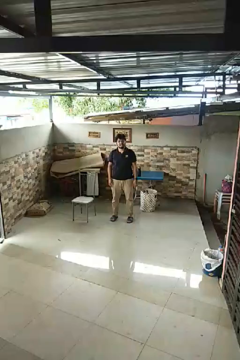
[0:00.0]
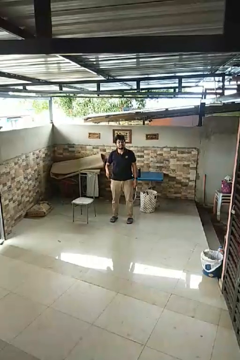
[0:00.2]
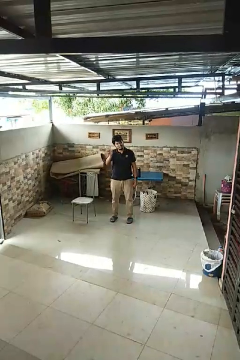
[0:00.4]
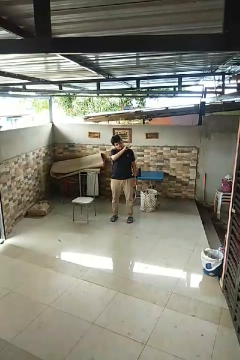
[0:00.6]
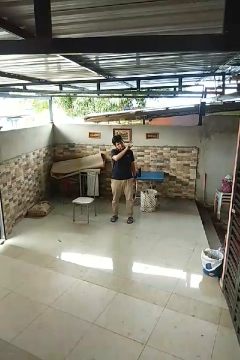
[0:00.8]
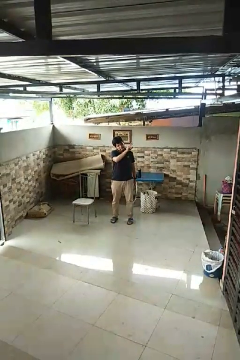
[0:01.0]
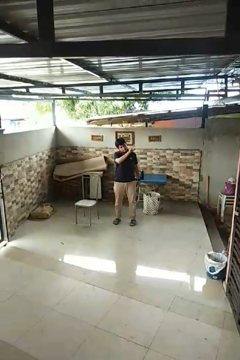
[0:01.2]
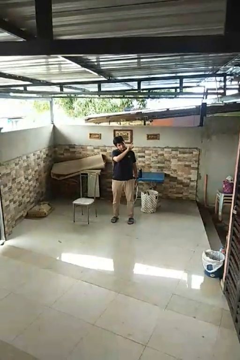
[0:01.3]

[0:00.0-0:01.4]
person gestures swipe left

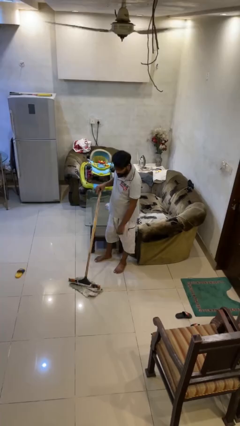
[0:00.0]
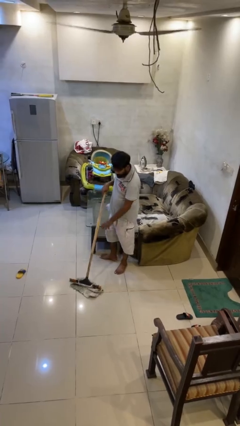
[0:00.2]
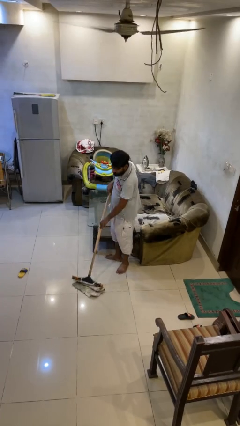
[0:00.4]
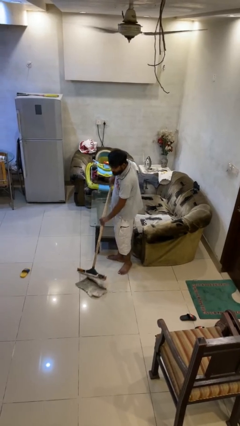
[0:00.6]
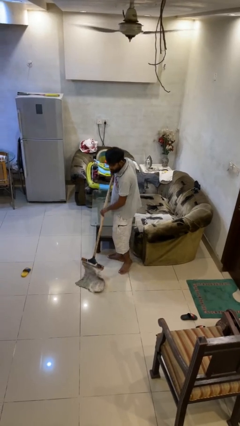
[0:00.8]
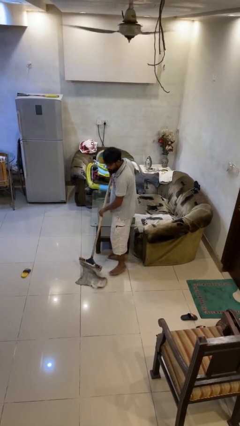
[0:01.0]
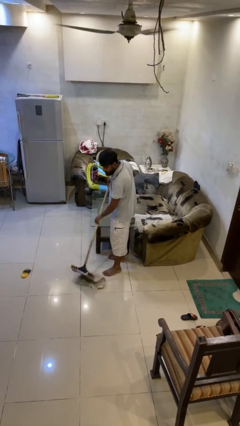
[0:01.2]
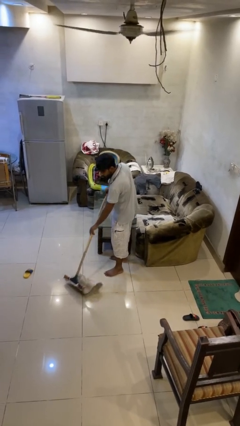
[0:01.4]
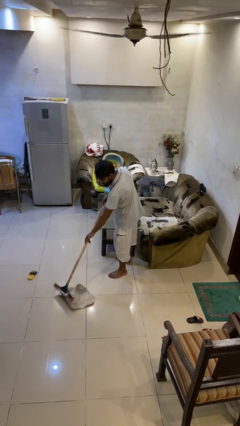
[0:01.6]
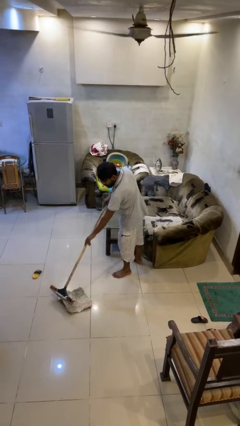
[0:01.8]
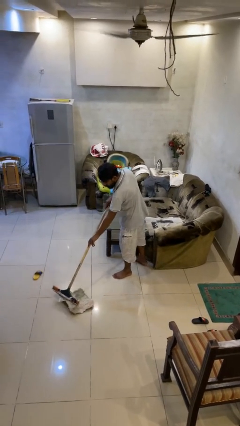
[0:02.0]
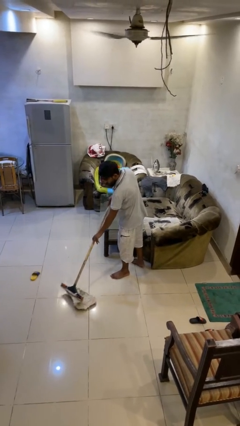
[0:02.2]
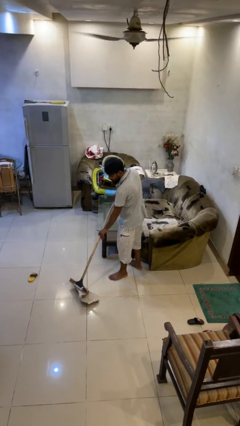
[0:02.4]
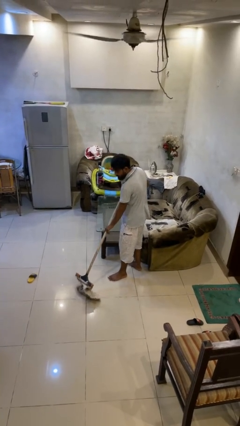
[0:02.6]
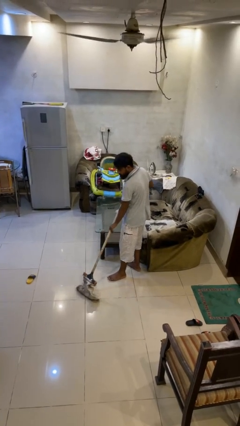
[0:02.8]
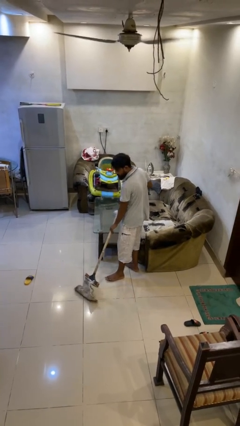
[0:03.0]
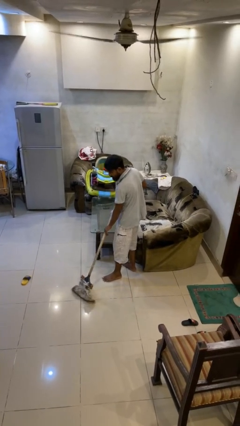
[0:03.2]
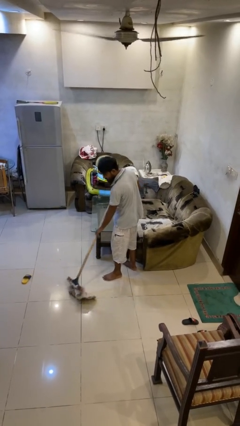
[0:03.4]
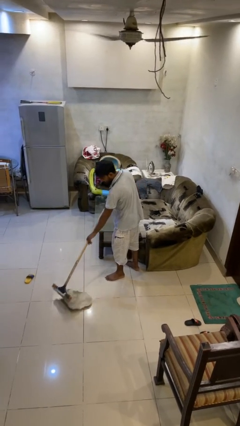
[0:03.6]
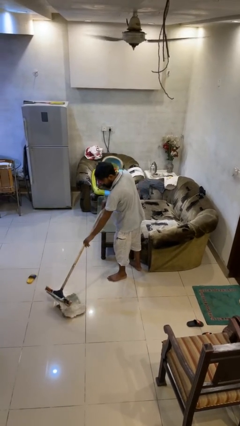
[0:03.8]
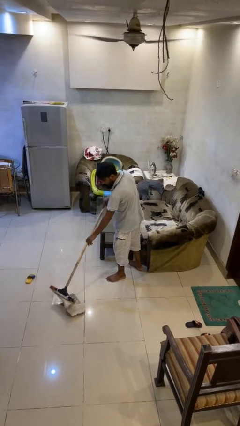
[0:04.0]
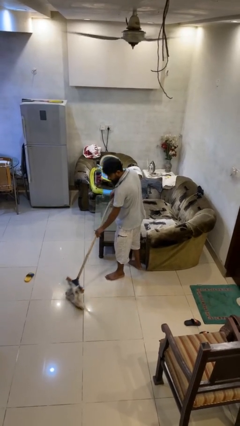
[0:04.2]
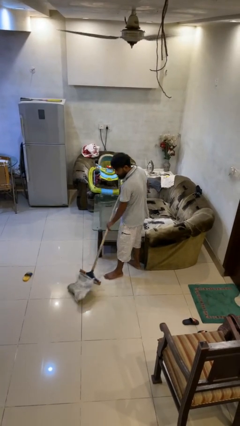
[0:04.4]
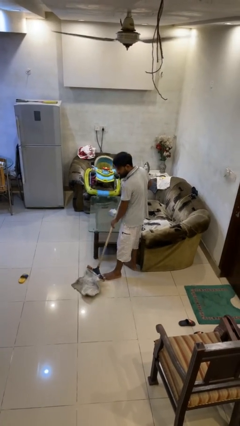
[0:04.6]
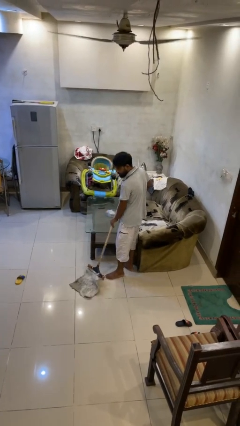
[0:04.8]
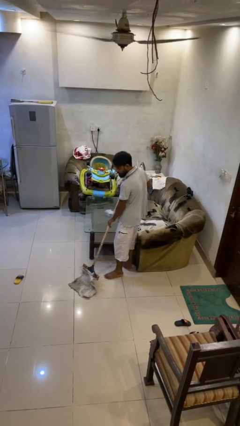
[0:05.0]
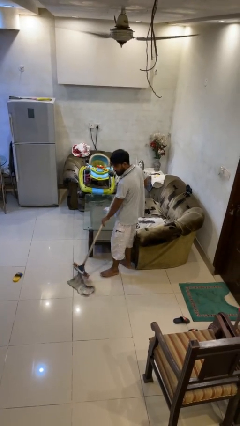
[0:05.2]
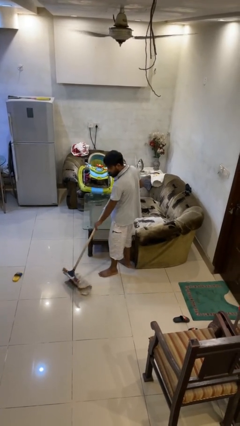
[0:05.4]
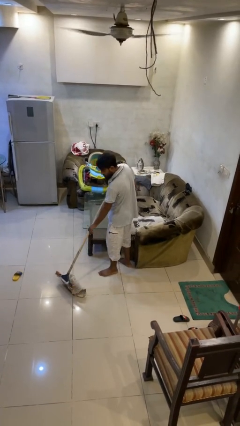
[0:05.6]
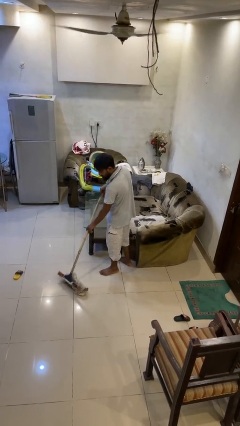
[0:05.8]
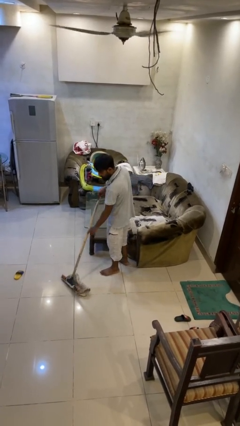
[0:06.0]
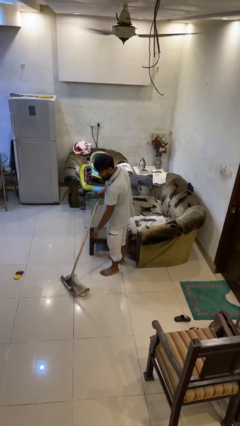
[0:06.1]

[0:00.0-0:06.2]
person mops

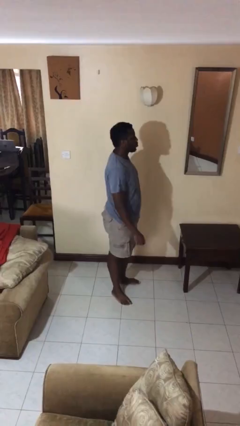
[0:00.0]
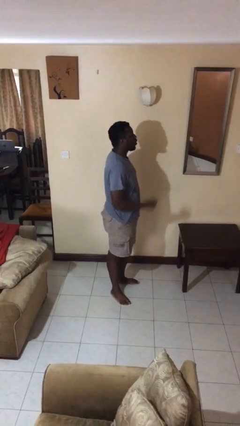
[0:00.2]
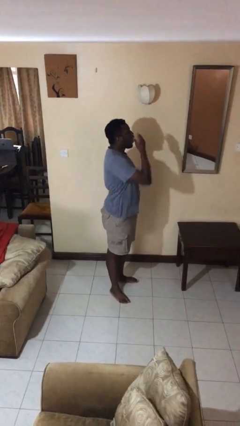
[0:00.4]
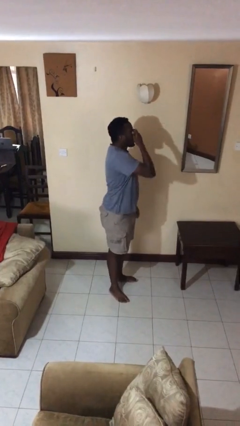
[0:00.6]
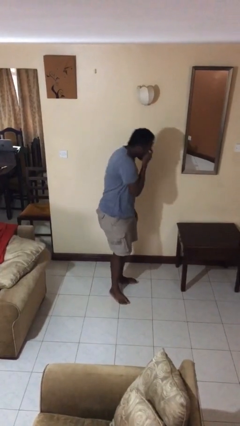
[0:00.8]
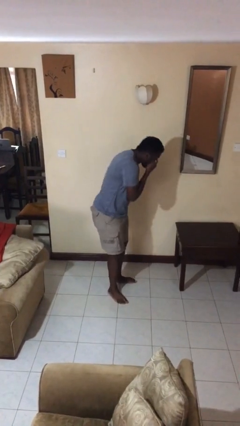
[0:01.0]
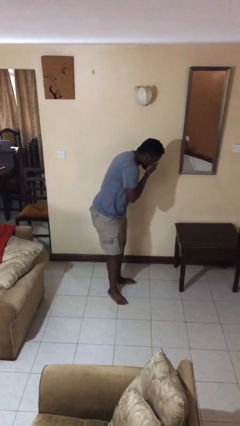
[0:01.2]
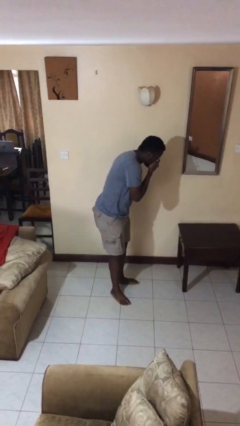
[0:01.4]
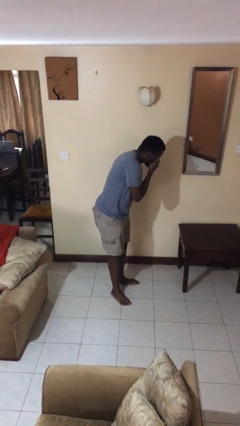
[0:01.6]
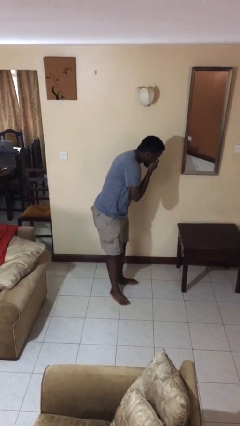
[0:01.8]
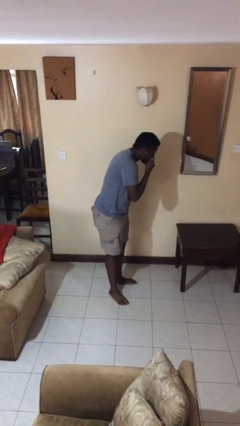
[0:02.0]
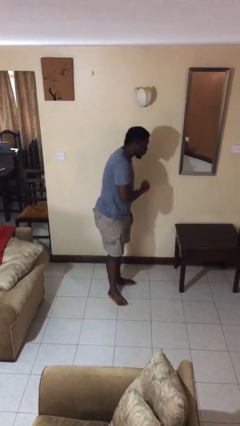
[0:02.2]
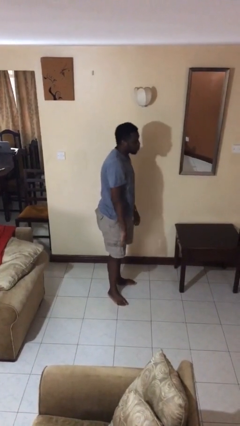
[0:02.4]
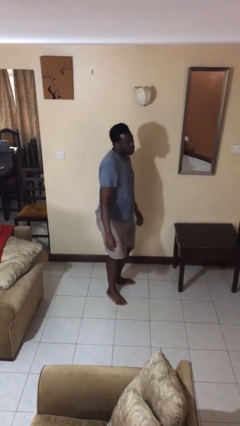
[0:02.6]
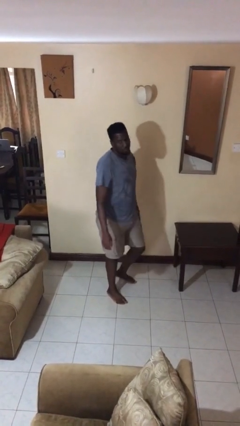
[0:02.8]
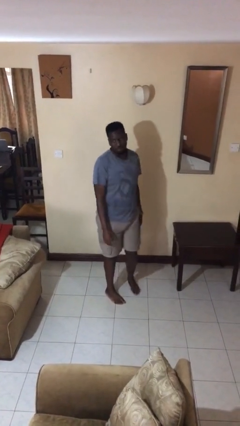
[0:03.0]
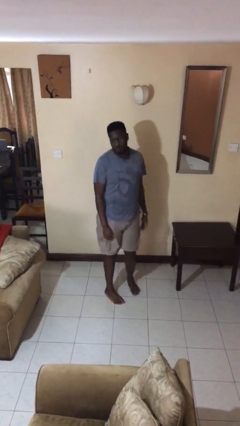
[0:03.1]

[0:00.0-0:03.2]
person sneezes into hand

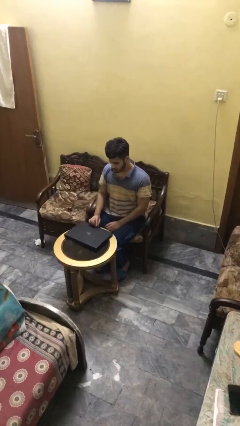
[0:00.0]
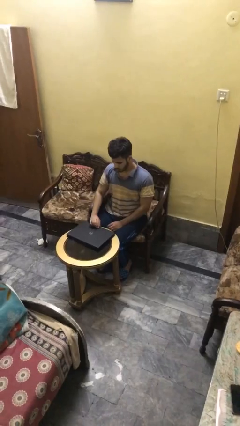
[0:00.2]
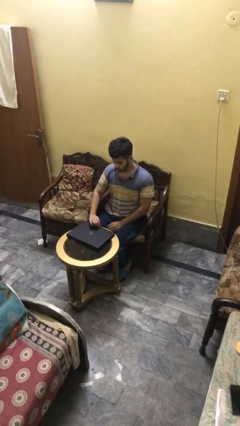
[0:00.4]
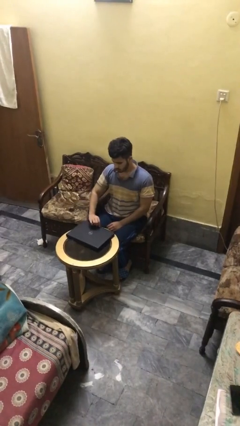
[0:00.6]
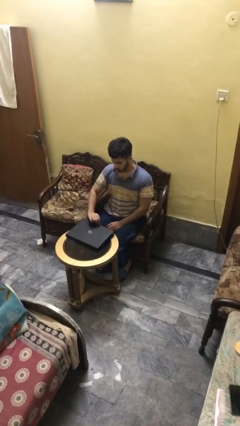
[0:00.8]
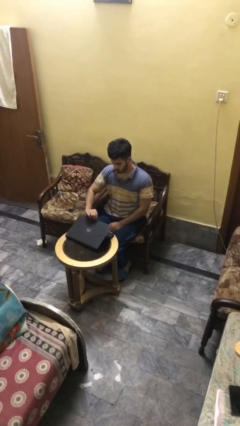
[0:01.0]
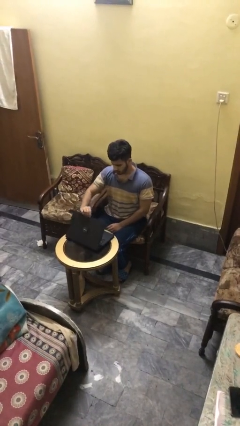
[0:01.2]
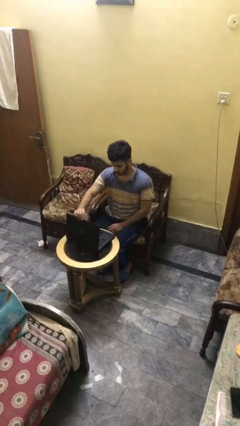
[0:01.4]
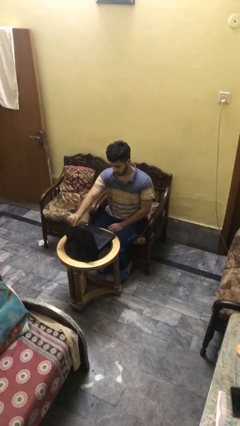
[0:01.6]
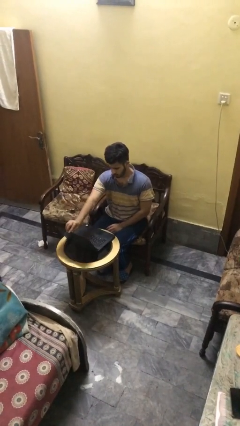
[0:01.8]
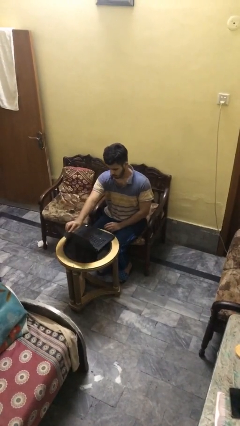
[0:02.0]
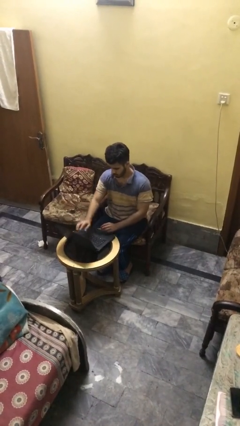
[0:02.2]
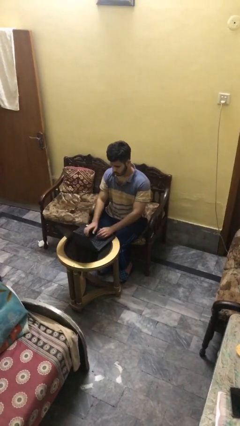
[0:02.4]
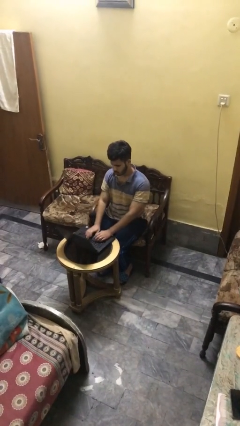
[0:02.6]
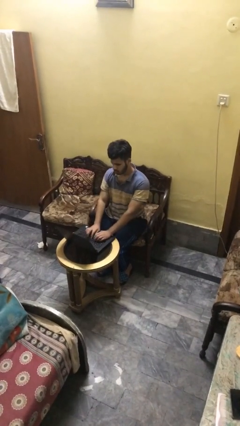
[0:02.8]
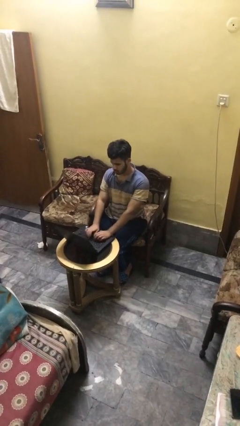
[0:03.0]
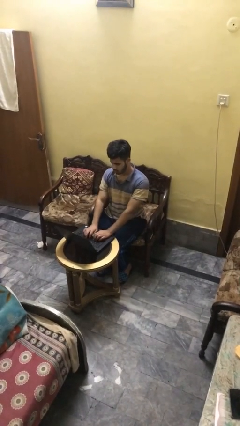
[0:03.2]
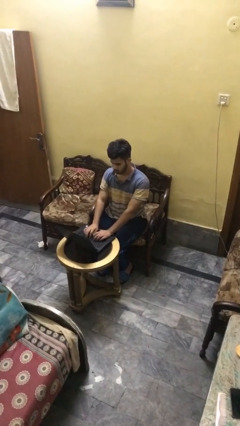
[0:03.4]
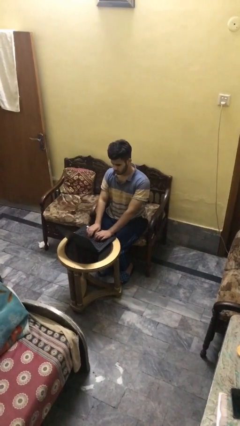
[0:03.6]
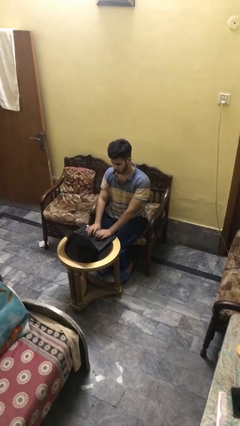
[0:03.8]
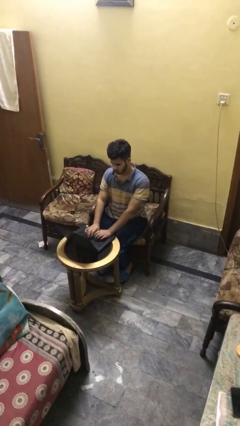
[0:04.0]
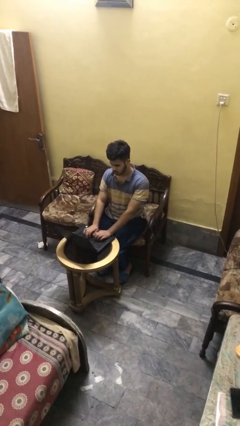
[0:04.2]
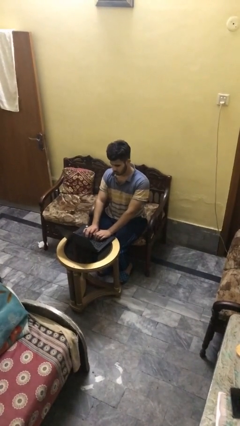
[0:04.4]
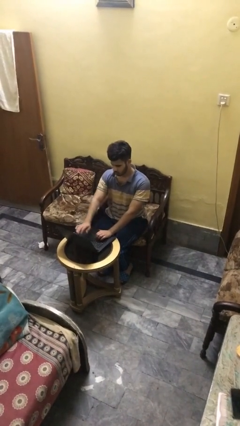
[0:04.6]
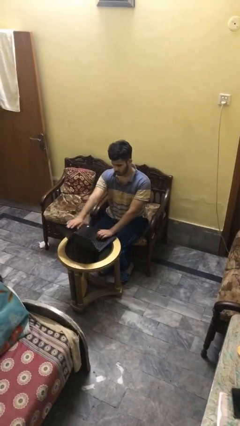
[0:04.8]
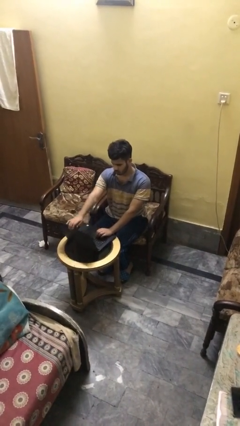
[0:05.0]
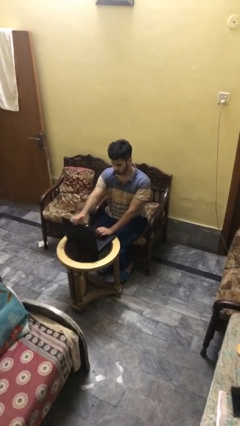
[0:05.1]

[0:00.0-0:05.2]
person interacts with laptop

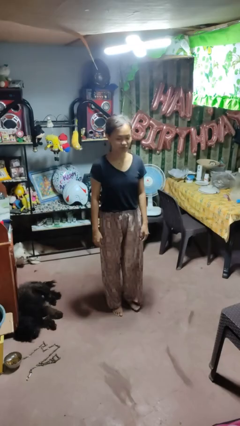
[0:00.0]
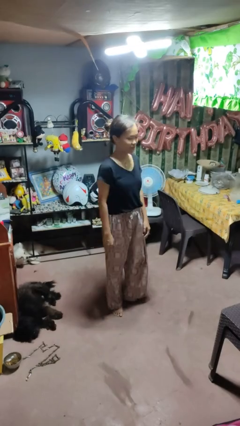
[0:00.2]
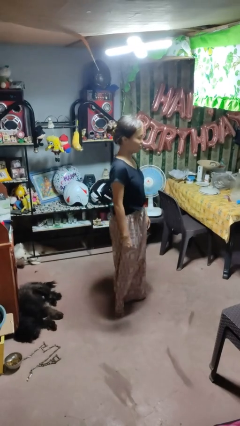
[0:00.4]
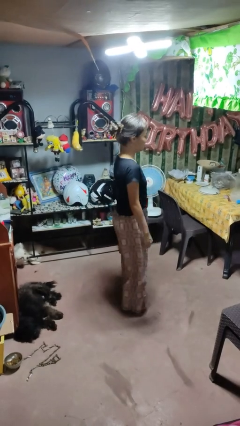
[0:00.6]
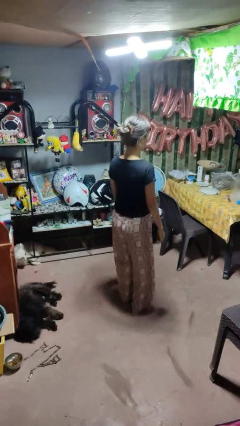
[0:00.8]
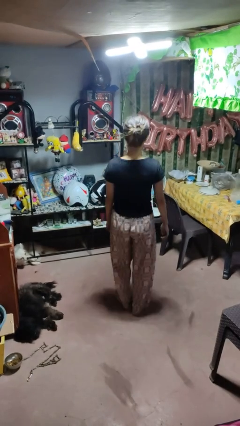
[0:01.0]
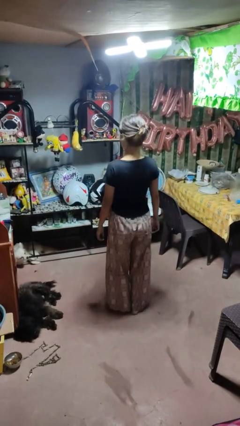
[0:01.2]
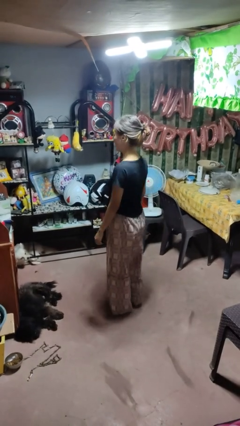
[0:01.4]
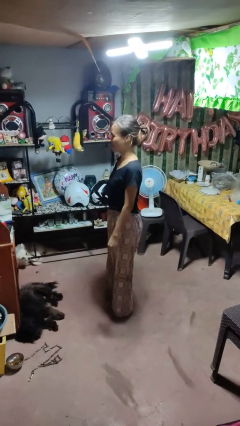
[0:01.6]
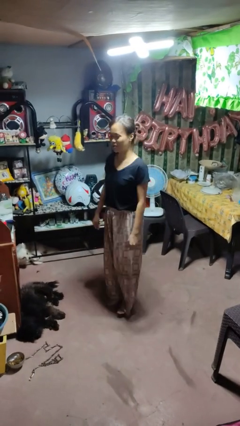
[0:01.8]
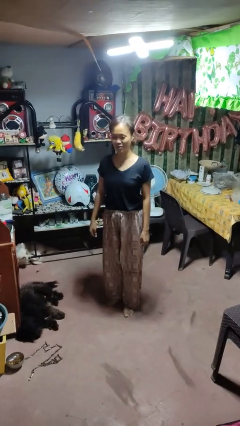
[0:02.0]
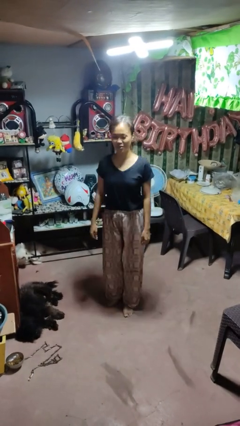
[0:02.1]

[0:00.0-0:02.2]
person twirls
